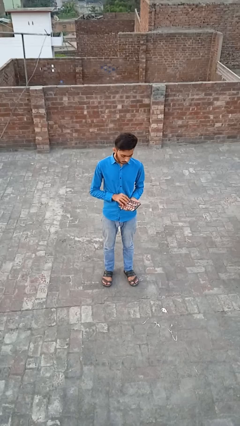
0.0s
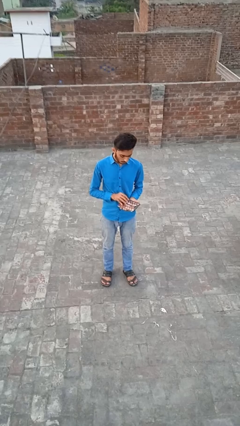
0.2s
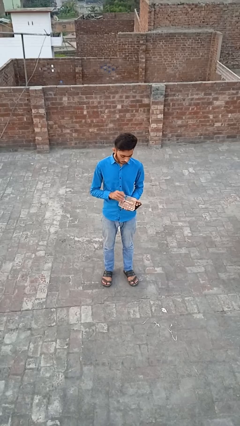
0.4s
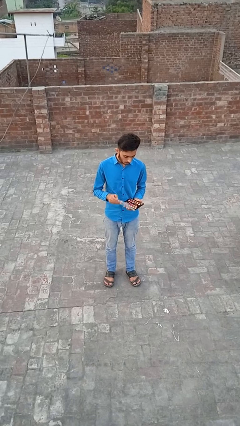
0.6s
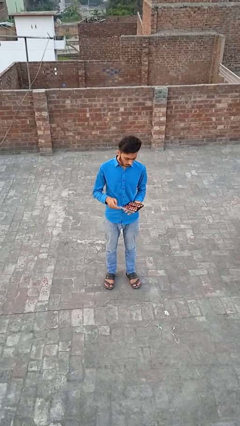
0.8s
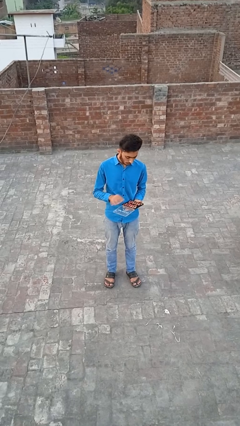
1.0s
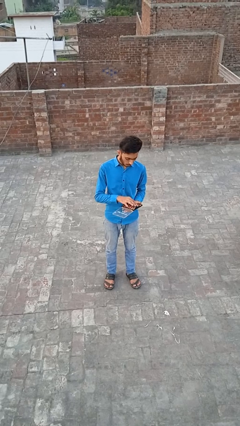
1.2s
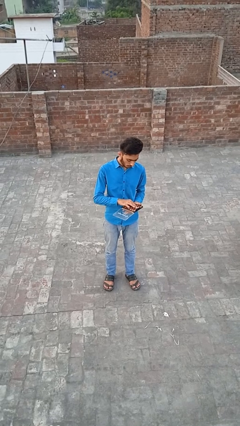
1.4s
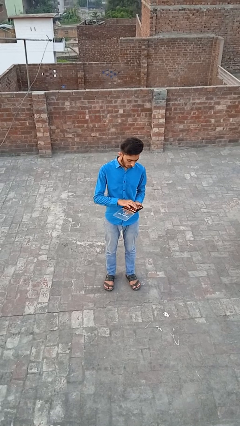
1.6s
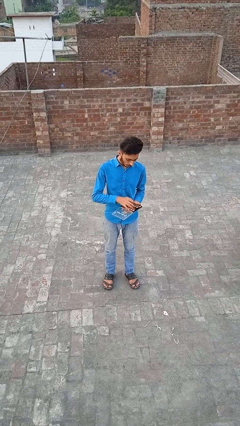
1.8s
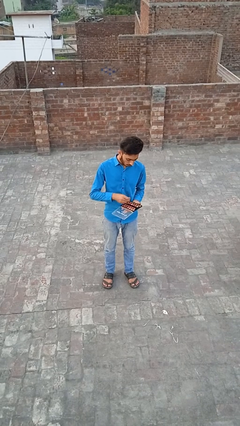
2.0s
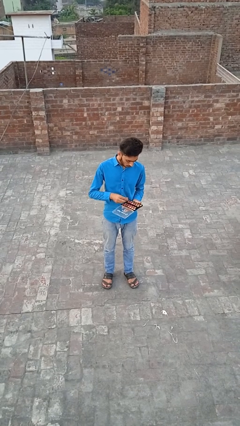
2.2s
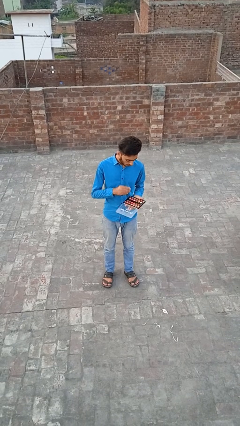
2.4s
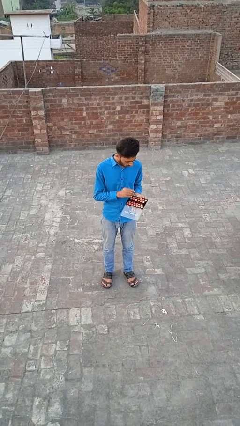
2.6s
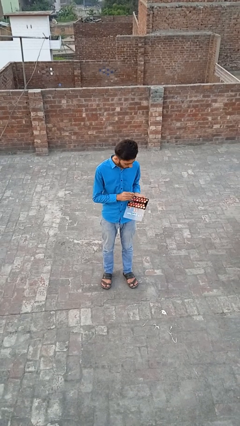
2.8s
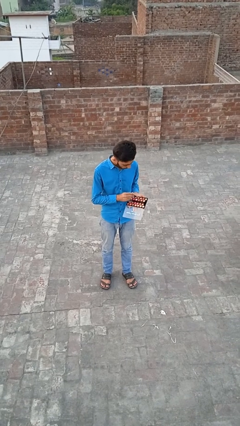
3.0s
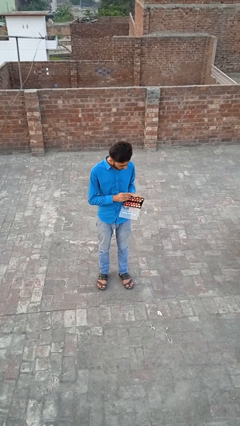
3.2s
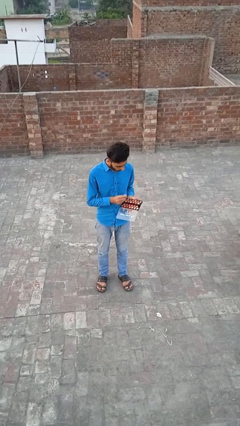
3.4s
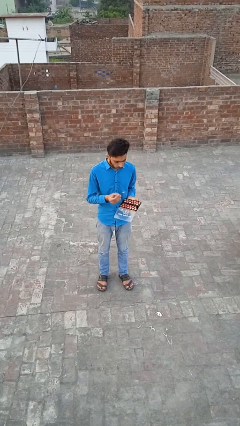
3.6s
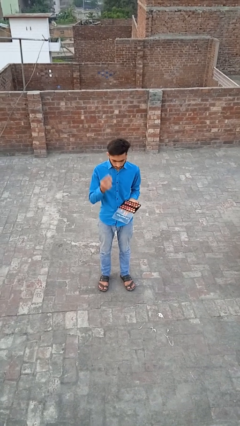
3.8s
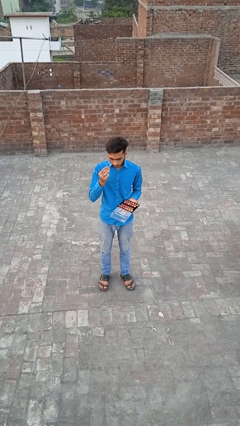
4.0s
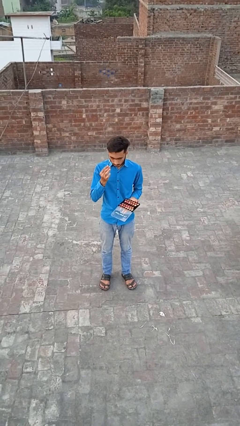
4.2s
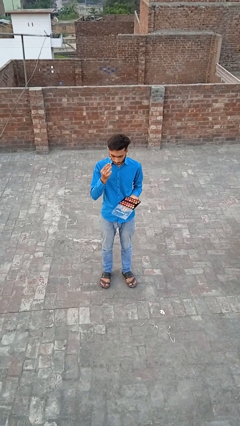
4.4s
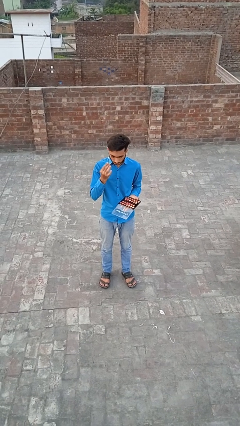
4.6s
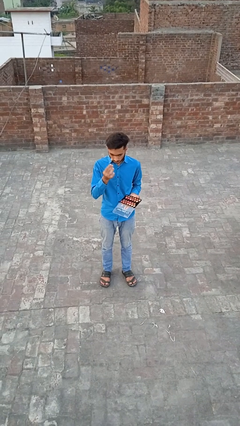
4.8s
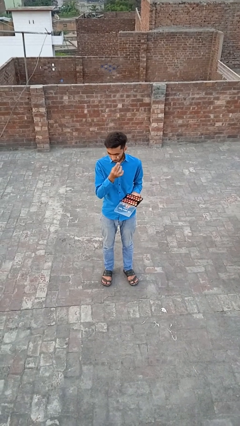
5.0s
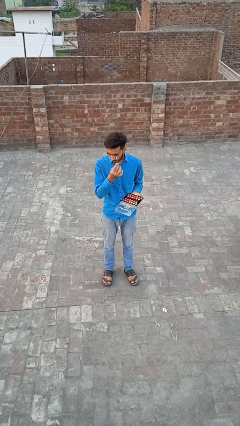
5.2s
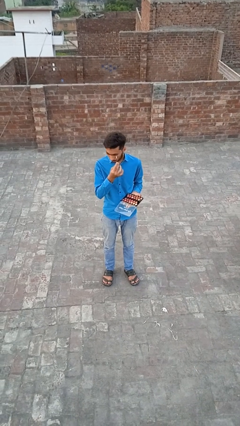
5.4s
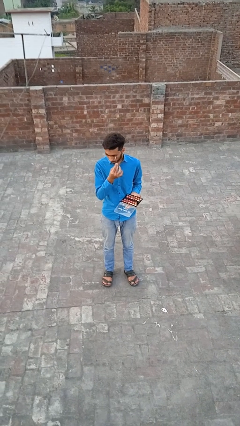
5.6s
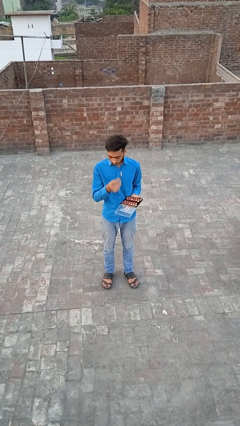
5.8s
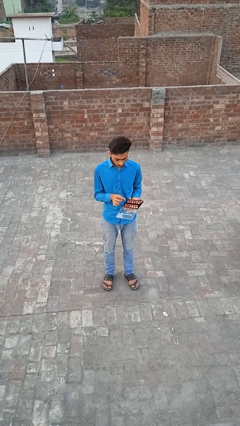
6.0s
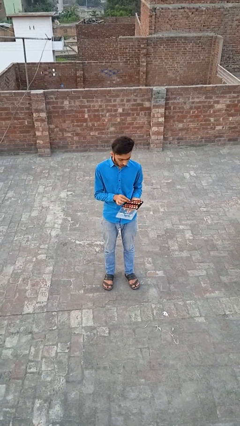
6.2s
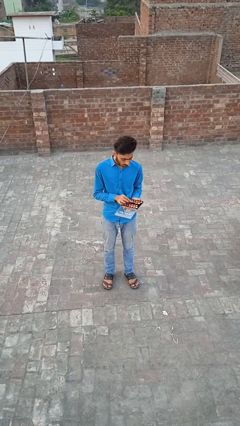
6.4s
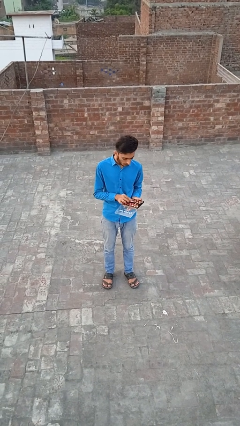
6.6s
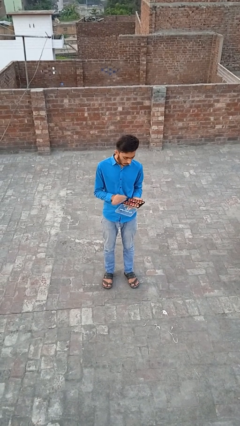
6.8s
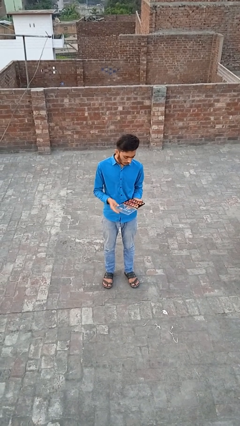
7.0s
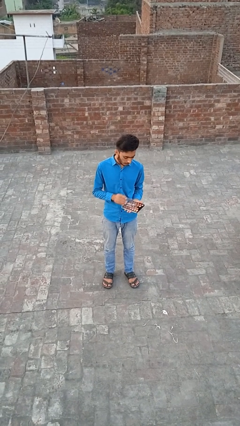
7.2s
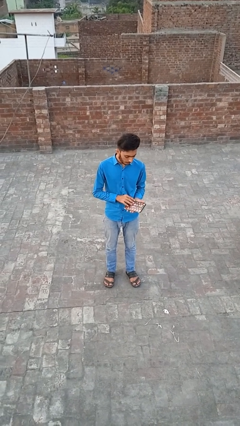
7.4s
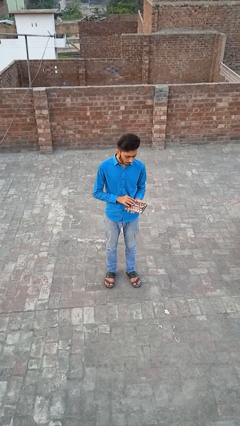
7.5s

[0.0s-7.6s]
person applies eye makeup

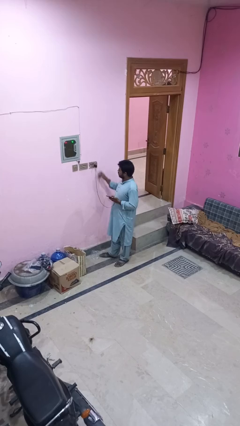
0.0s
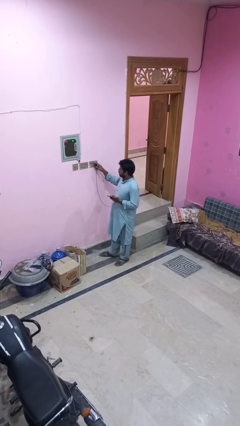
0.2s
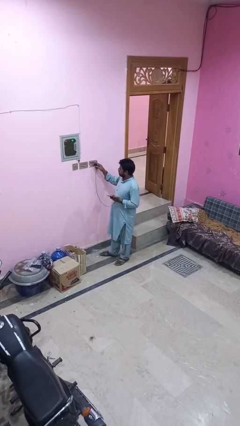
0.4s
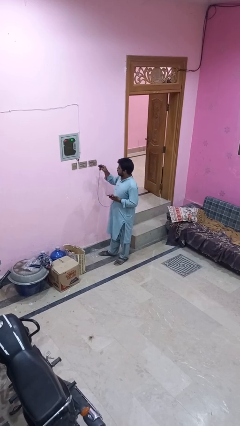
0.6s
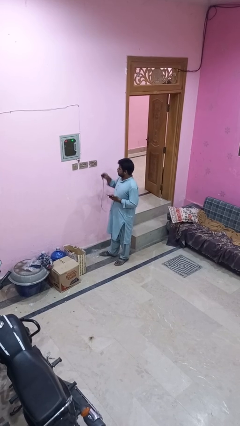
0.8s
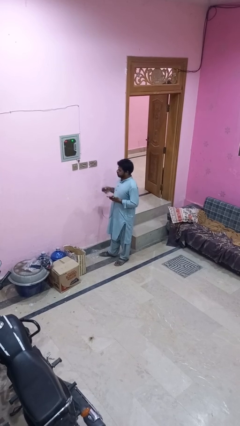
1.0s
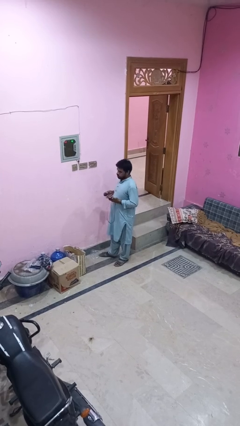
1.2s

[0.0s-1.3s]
person unplugs from electrical socket

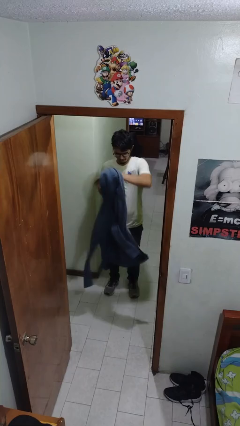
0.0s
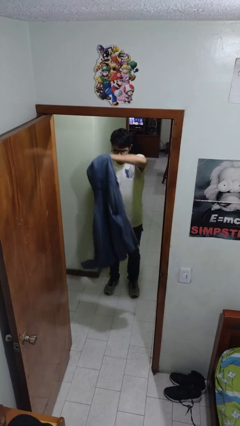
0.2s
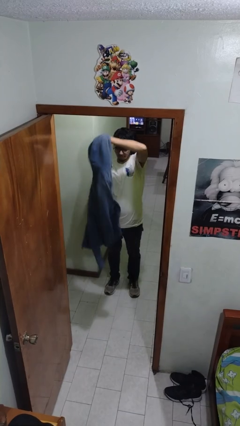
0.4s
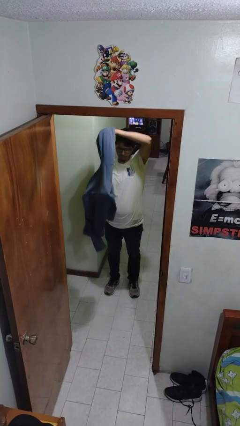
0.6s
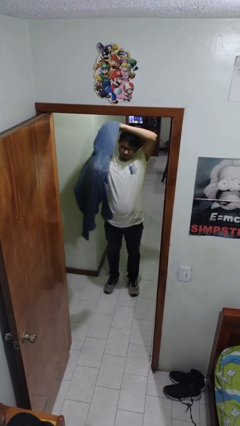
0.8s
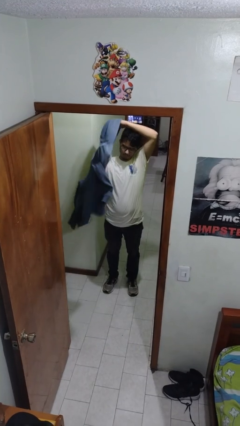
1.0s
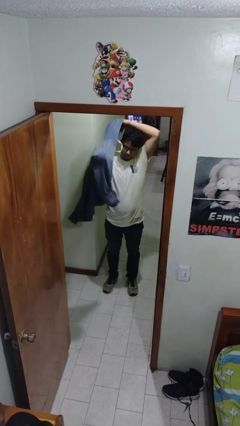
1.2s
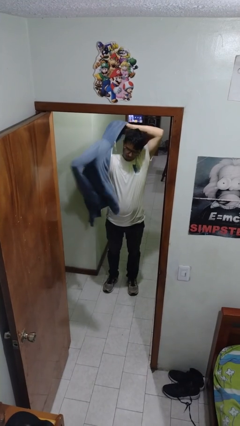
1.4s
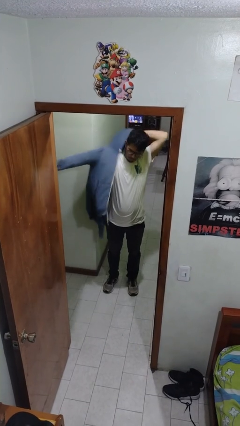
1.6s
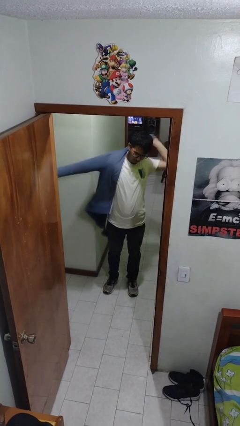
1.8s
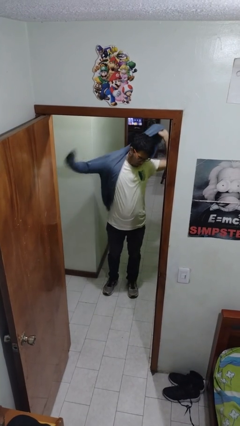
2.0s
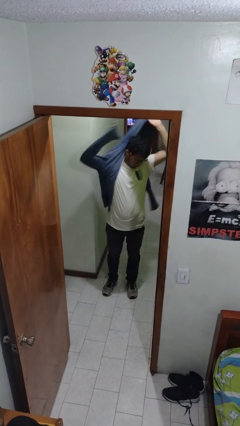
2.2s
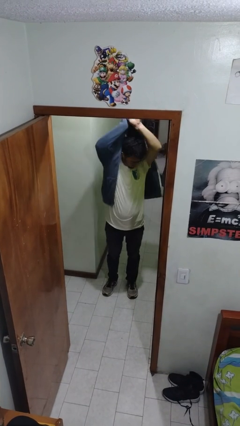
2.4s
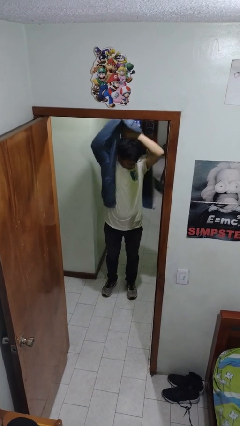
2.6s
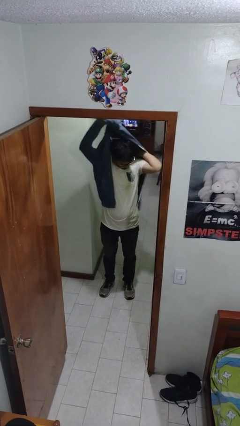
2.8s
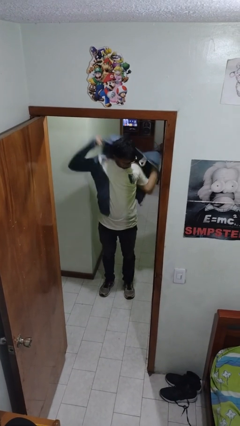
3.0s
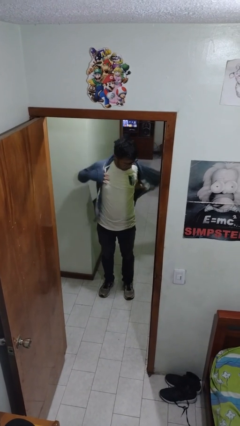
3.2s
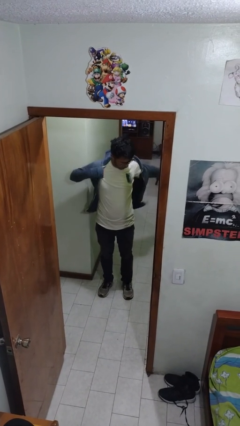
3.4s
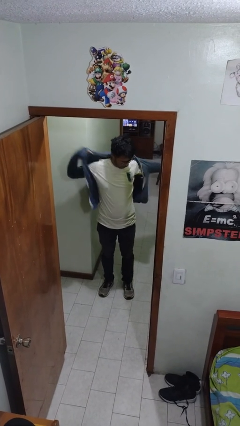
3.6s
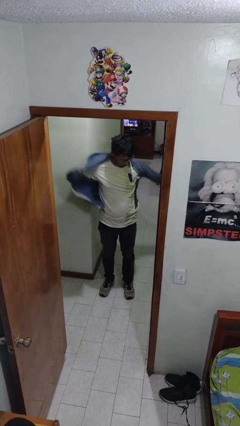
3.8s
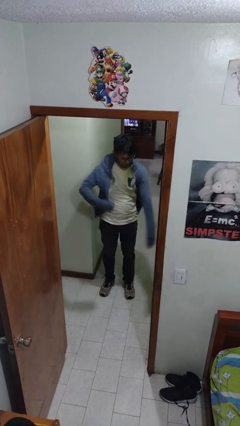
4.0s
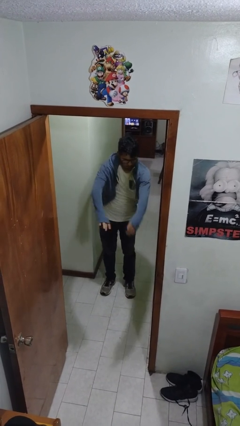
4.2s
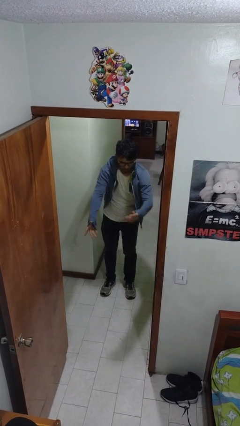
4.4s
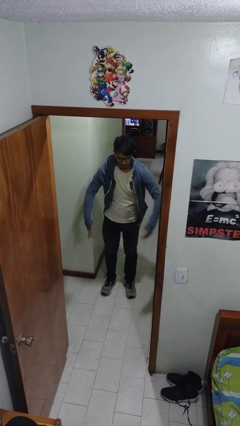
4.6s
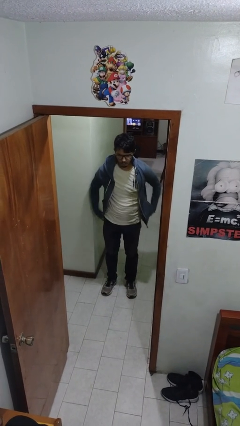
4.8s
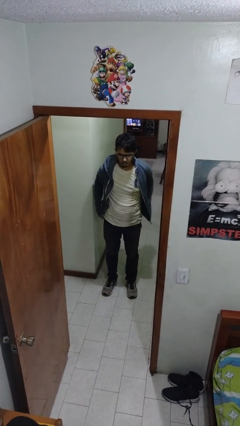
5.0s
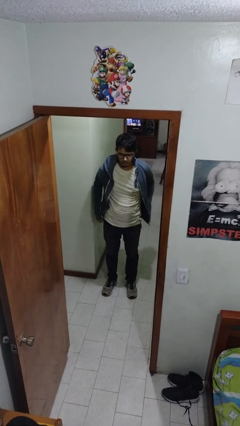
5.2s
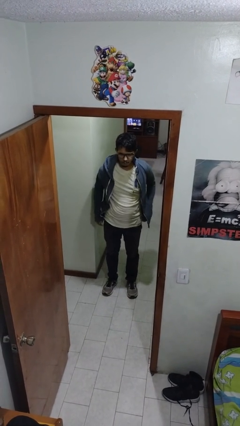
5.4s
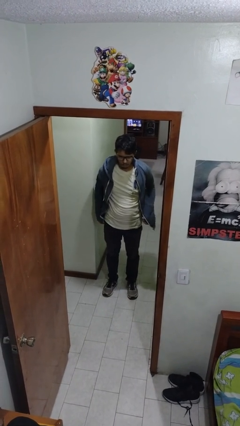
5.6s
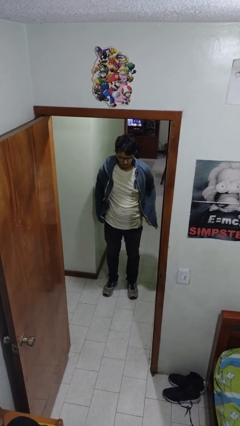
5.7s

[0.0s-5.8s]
person puts on jacket

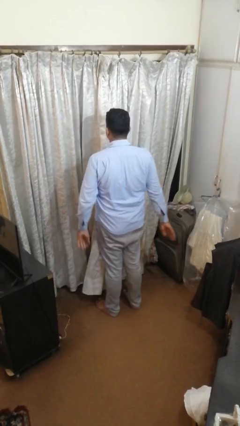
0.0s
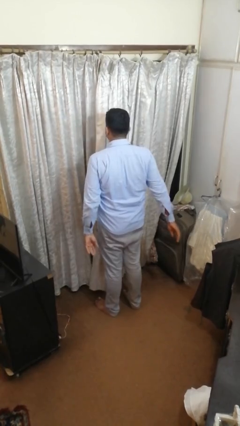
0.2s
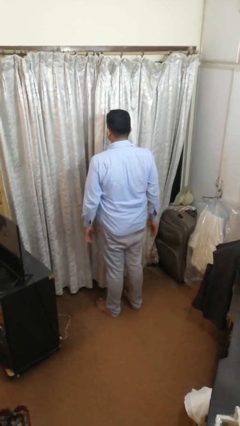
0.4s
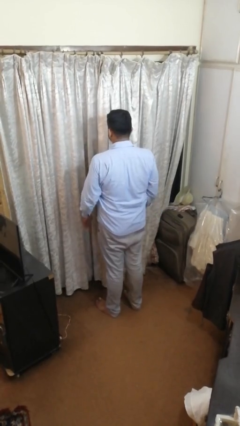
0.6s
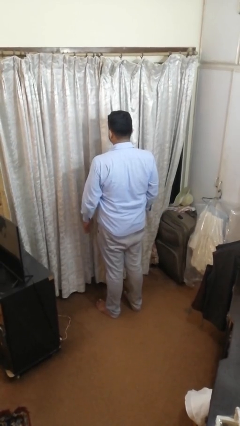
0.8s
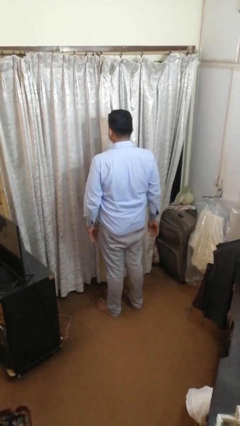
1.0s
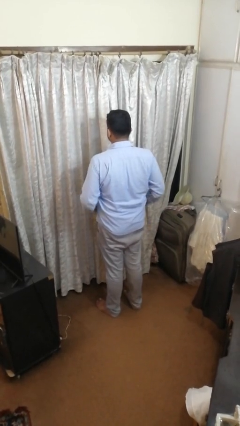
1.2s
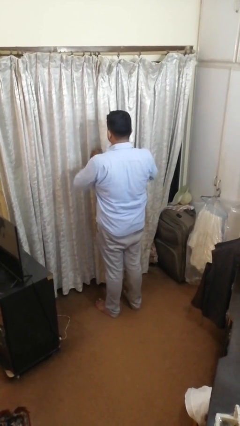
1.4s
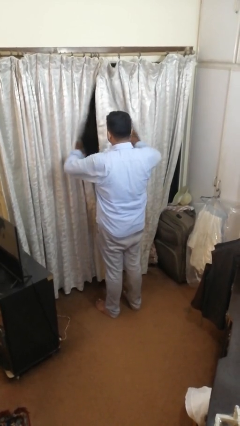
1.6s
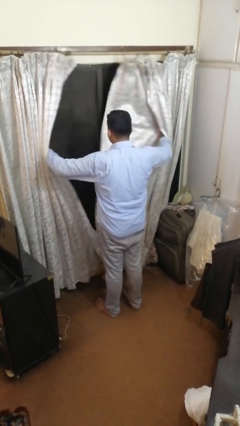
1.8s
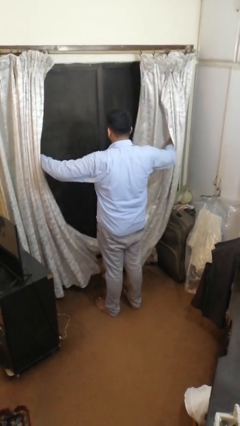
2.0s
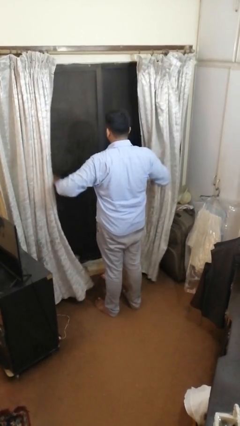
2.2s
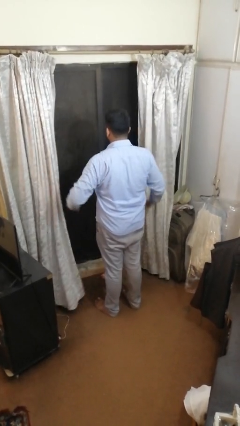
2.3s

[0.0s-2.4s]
person opens curtains

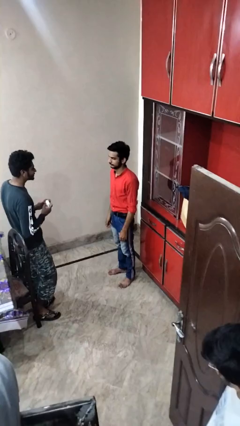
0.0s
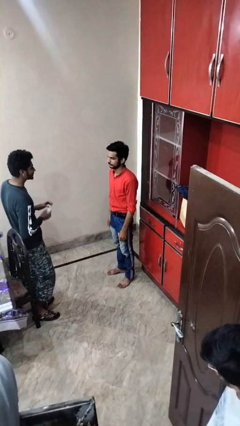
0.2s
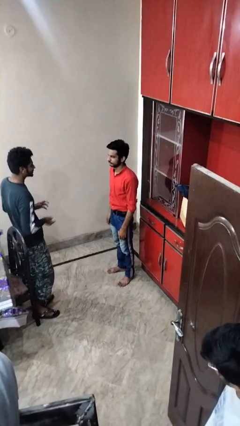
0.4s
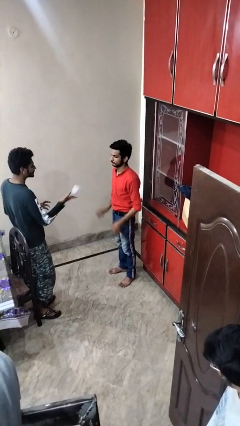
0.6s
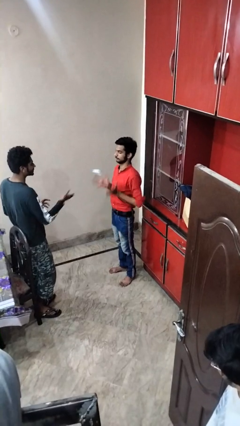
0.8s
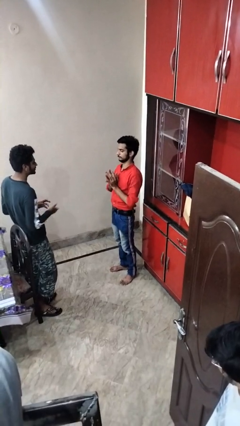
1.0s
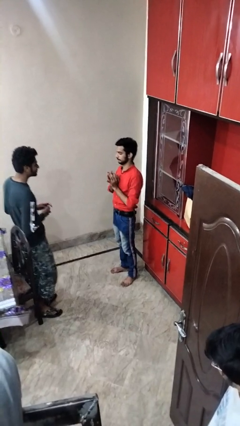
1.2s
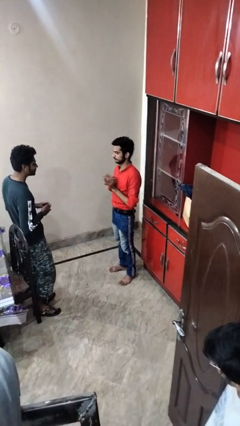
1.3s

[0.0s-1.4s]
person catches object from person
